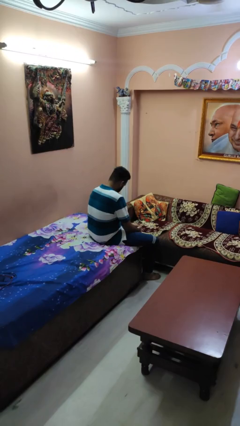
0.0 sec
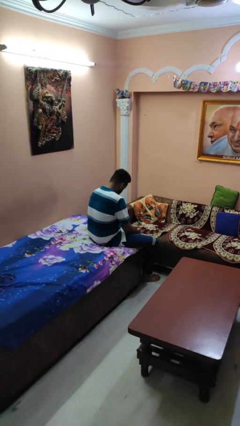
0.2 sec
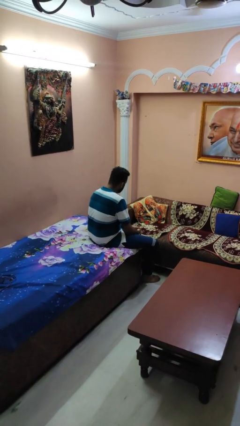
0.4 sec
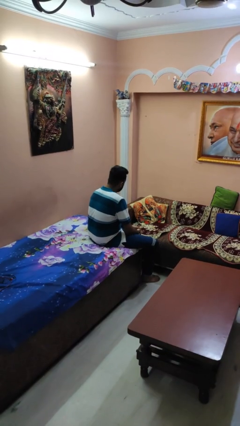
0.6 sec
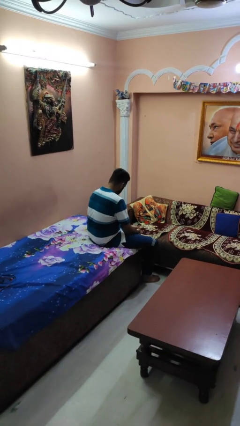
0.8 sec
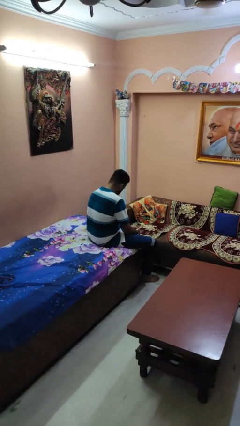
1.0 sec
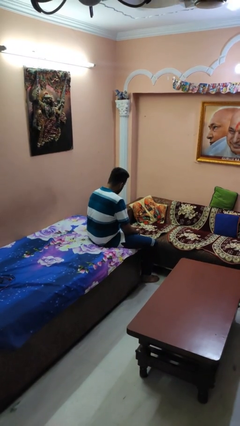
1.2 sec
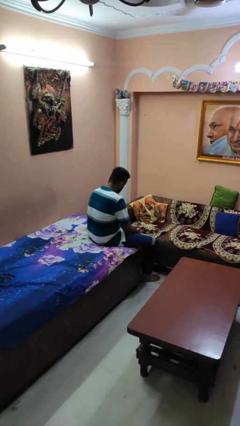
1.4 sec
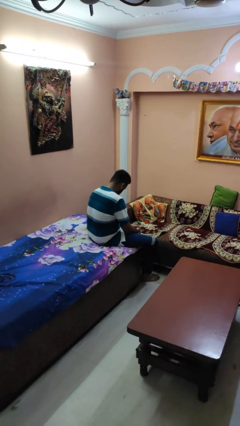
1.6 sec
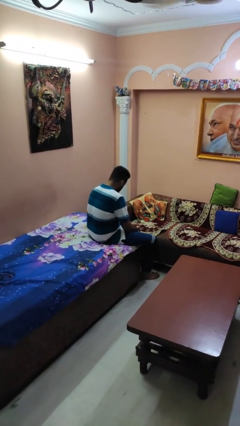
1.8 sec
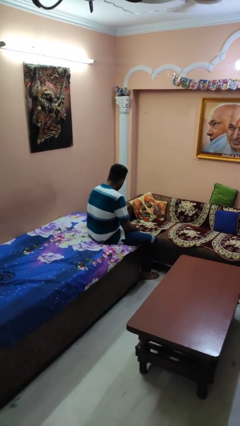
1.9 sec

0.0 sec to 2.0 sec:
person nods head

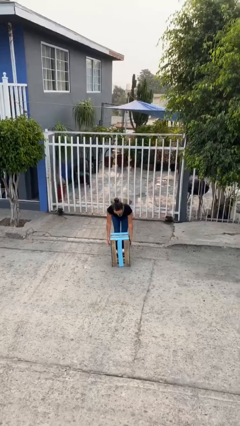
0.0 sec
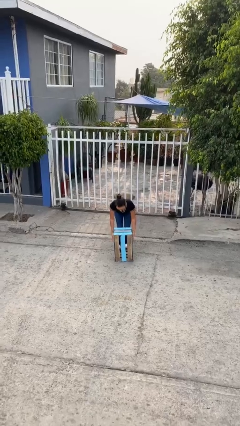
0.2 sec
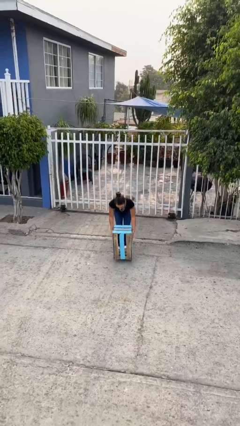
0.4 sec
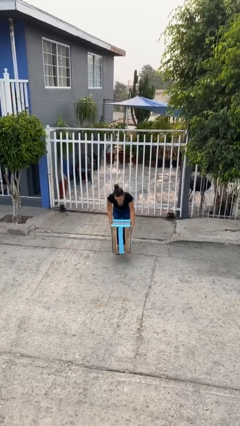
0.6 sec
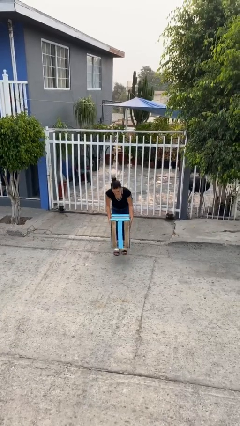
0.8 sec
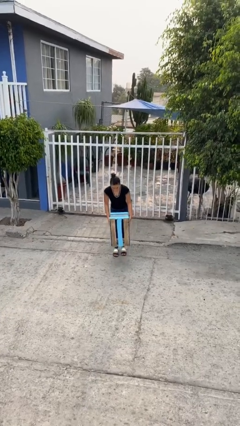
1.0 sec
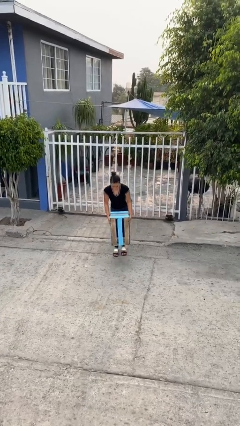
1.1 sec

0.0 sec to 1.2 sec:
person picks up object from floor

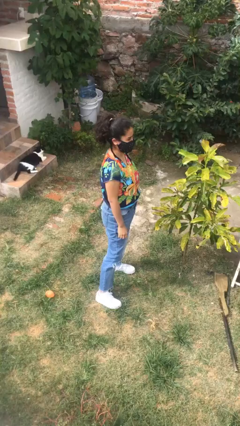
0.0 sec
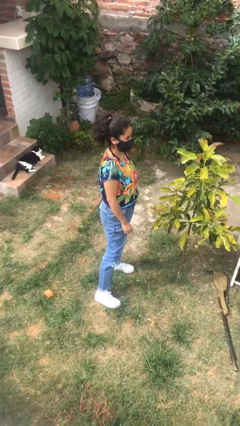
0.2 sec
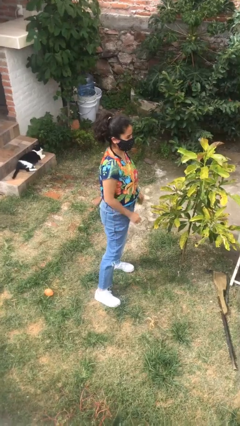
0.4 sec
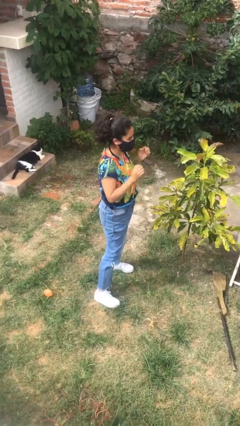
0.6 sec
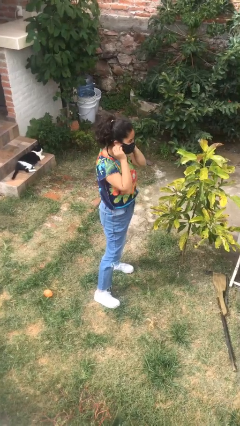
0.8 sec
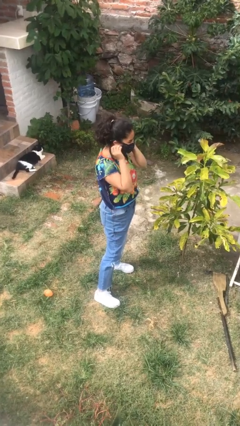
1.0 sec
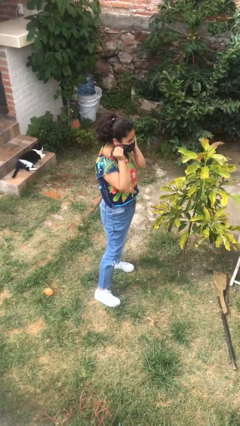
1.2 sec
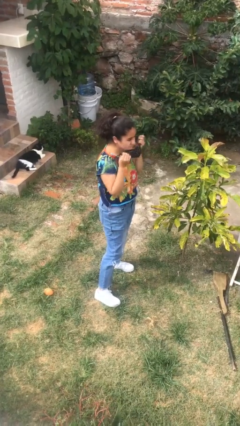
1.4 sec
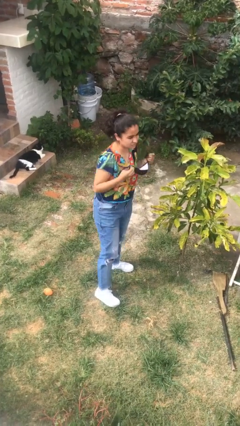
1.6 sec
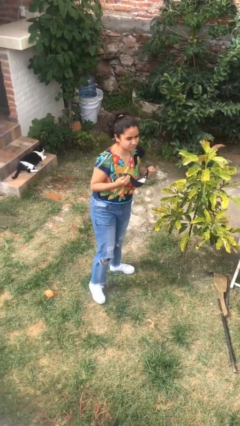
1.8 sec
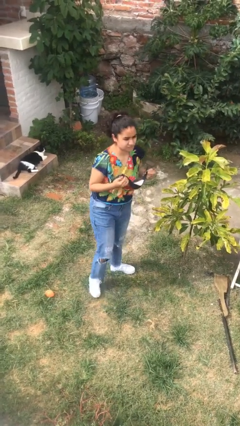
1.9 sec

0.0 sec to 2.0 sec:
person takes off facemask

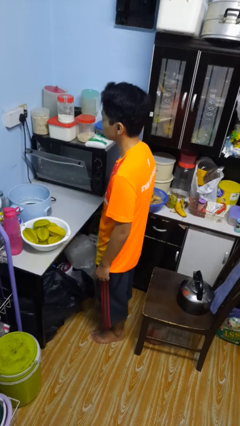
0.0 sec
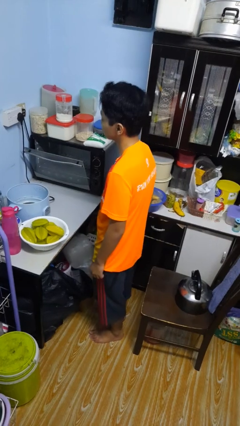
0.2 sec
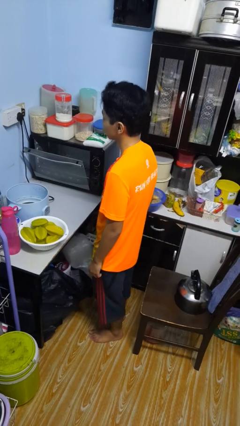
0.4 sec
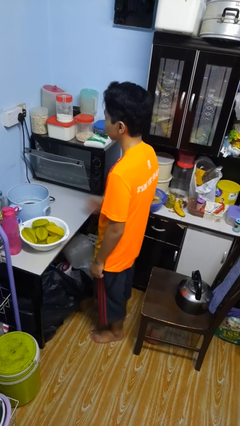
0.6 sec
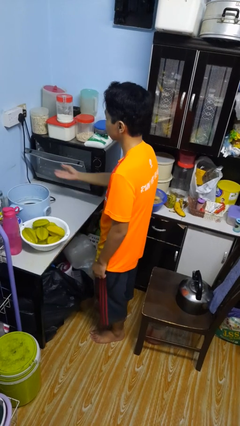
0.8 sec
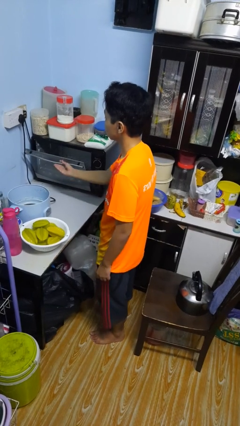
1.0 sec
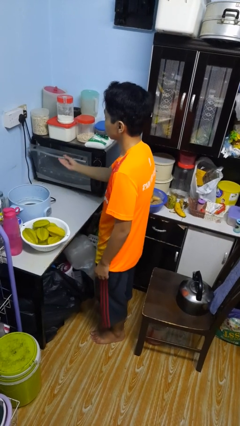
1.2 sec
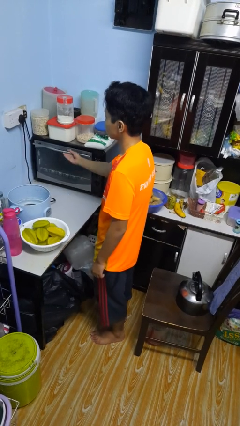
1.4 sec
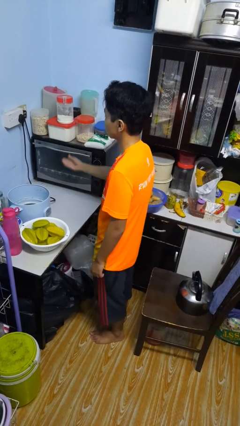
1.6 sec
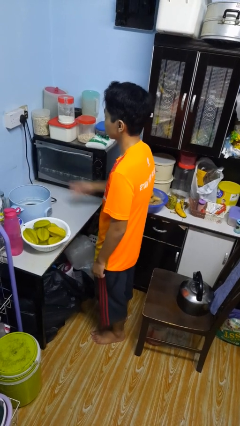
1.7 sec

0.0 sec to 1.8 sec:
person closes microwave

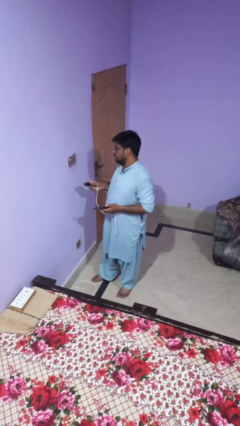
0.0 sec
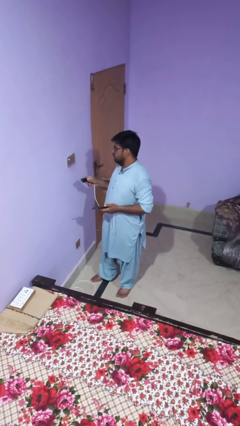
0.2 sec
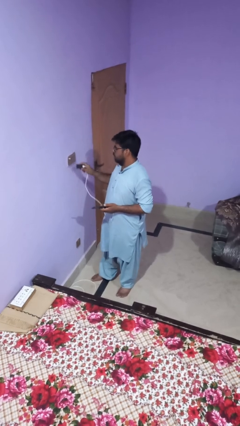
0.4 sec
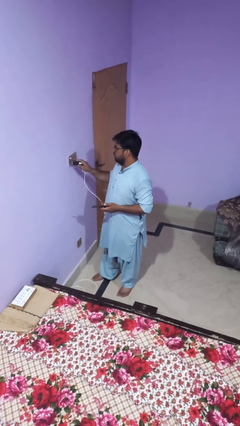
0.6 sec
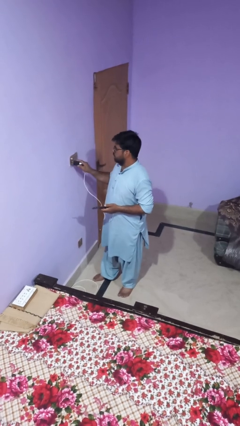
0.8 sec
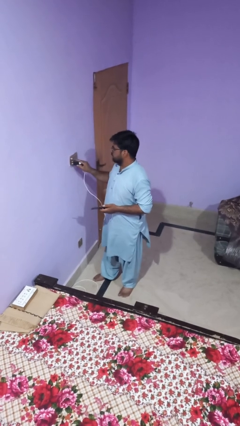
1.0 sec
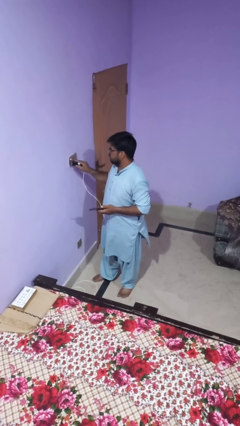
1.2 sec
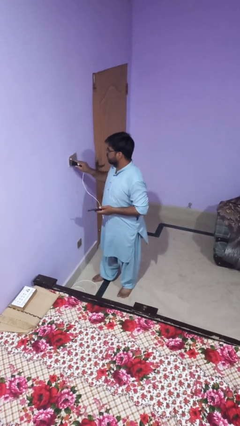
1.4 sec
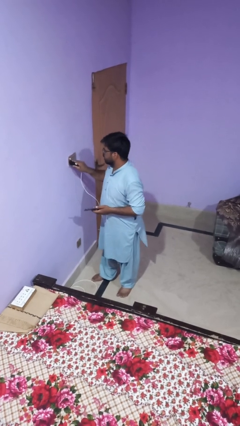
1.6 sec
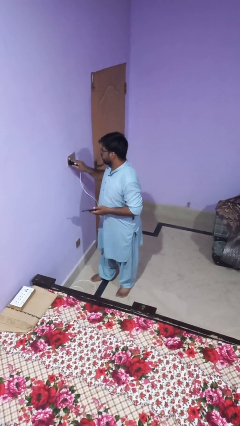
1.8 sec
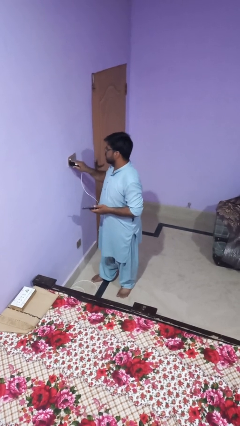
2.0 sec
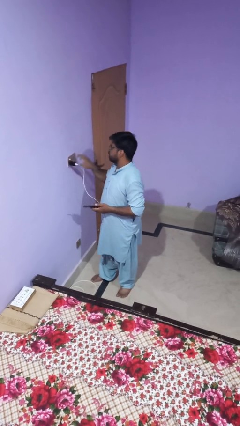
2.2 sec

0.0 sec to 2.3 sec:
person plugs into electrical socket

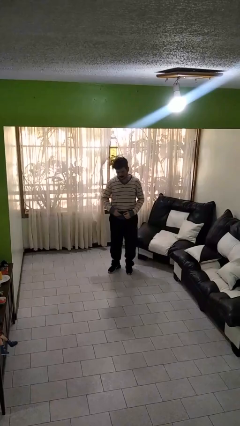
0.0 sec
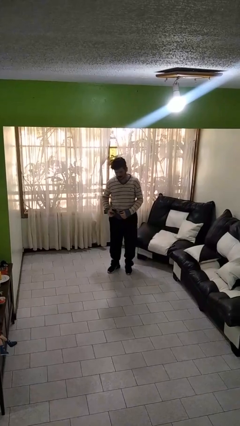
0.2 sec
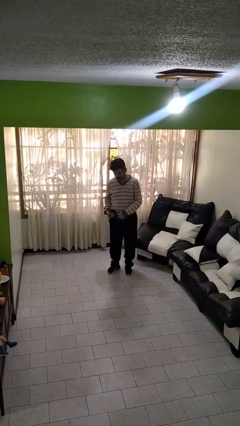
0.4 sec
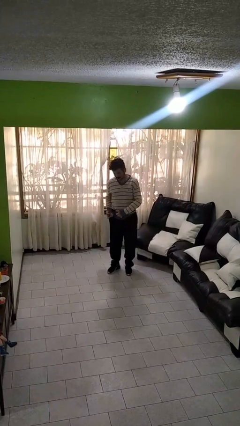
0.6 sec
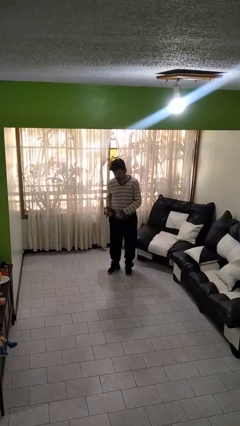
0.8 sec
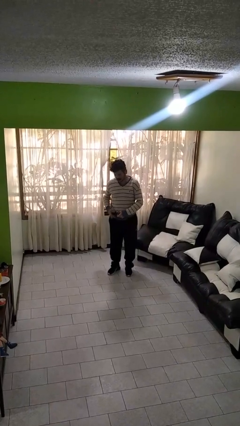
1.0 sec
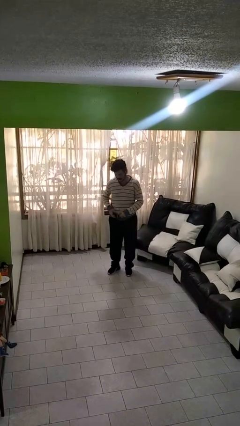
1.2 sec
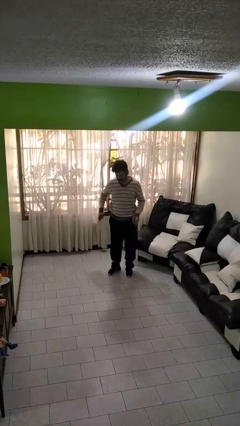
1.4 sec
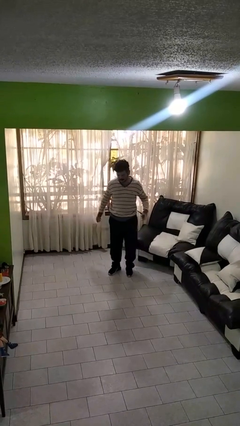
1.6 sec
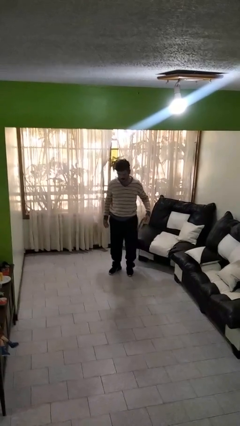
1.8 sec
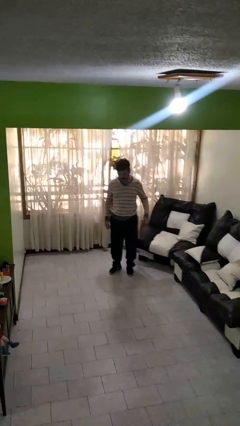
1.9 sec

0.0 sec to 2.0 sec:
person takes off belt

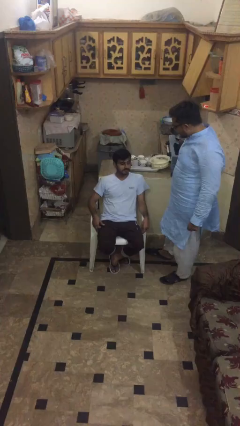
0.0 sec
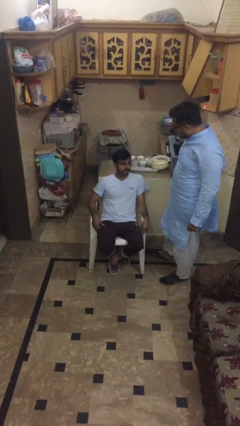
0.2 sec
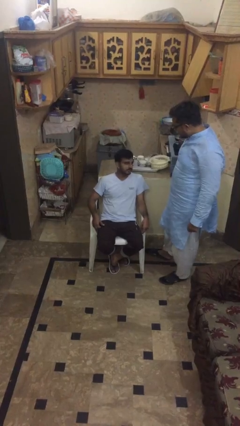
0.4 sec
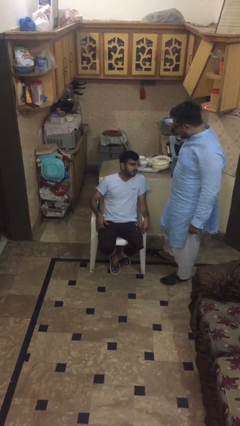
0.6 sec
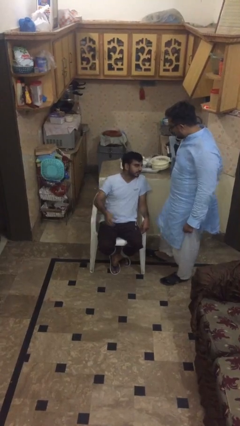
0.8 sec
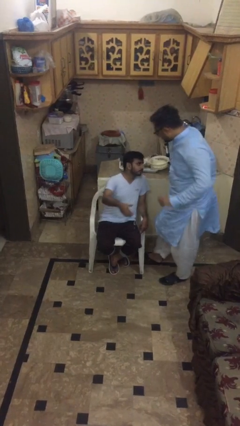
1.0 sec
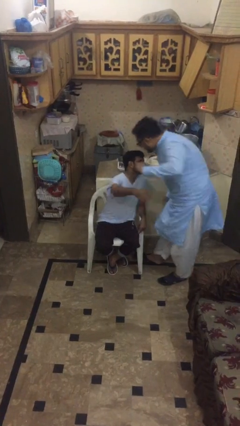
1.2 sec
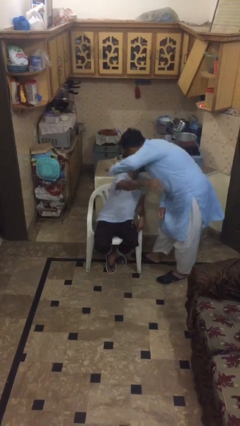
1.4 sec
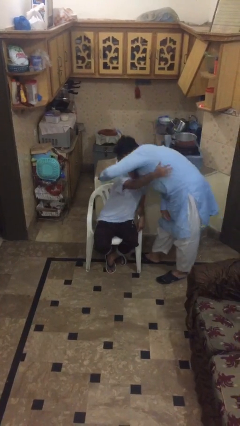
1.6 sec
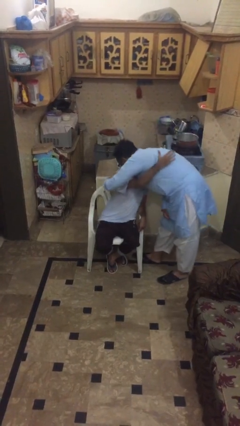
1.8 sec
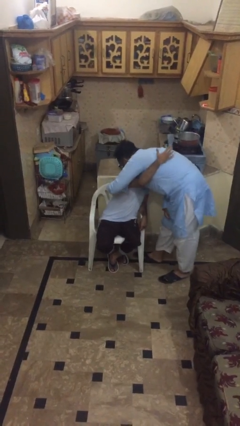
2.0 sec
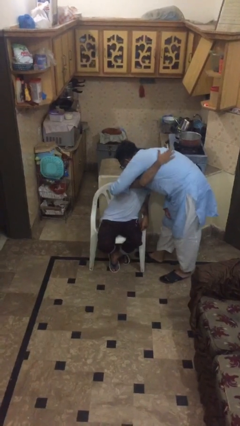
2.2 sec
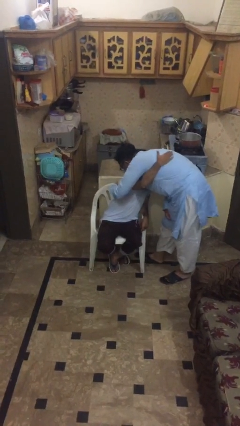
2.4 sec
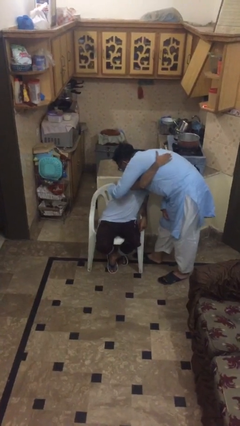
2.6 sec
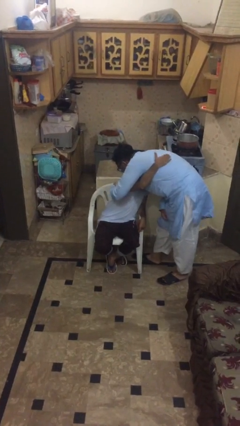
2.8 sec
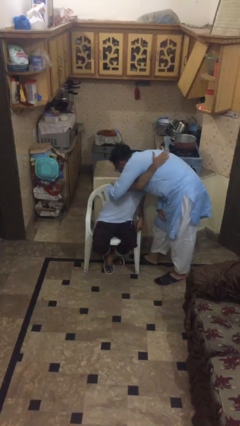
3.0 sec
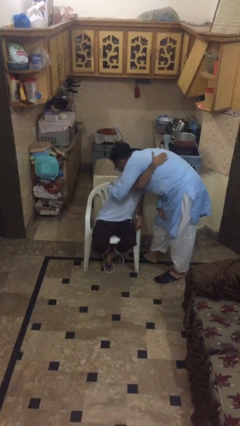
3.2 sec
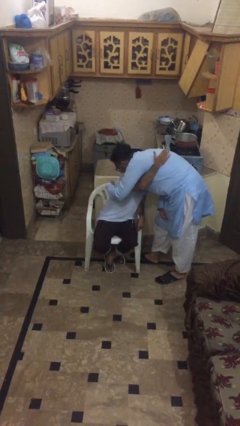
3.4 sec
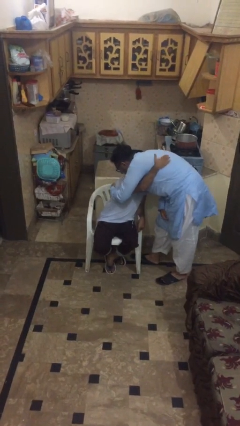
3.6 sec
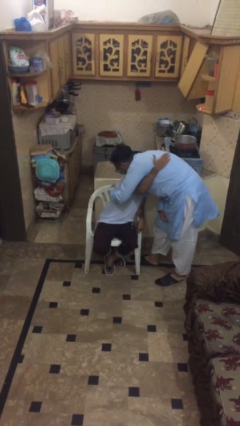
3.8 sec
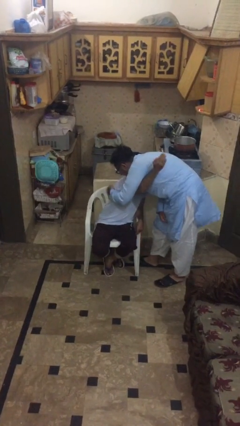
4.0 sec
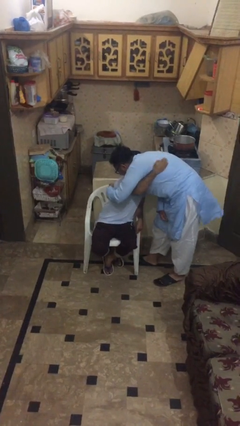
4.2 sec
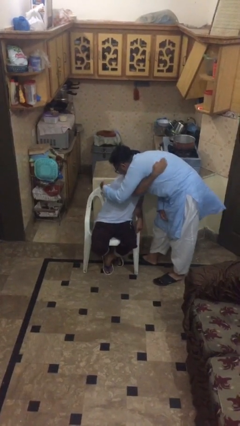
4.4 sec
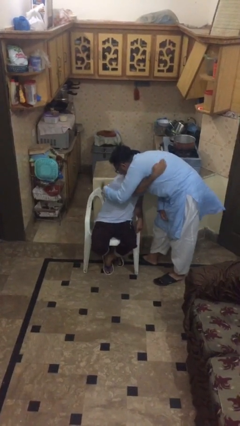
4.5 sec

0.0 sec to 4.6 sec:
person embraces person

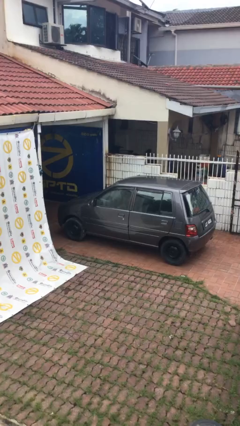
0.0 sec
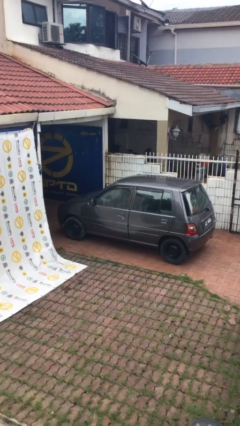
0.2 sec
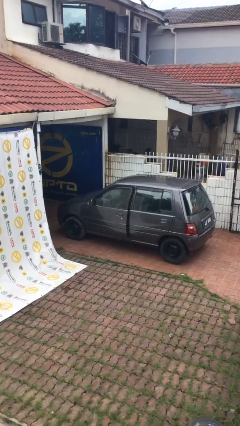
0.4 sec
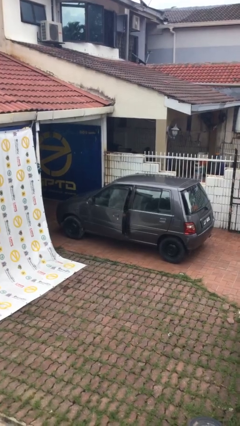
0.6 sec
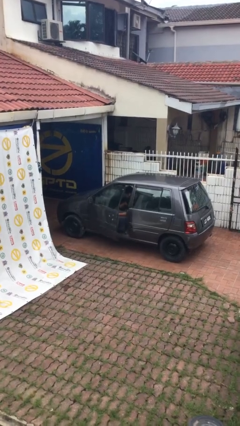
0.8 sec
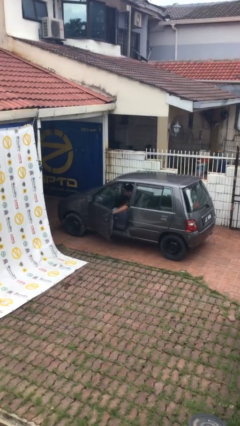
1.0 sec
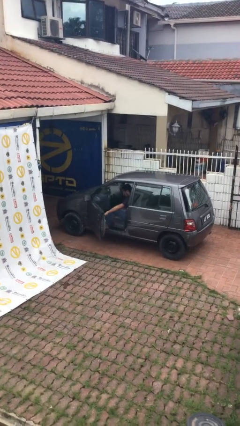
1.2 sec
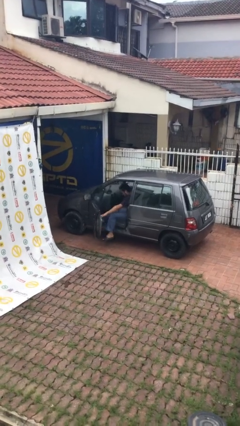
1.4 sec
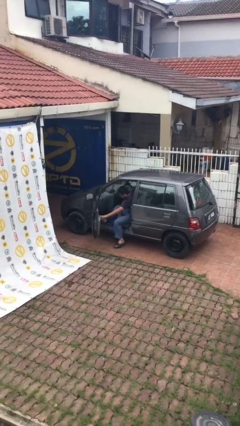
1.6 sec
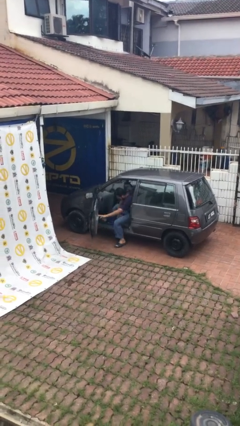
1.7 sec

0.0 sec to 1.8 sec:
person opens car door
